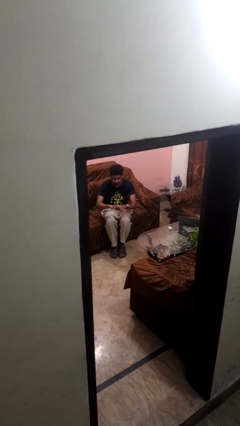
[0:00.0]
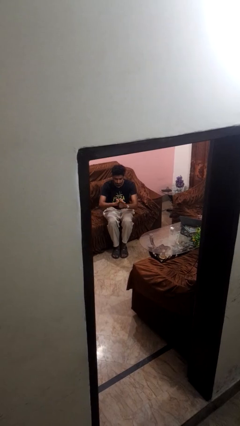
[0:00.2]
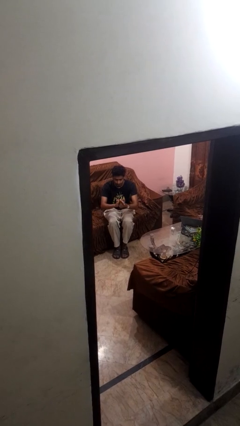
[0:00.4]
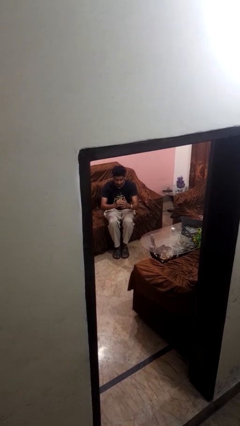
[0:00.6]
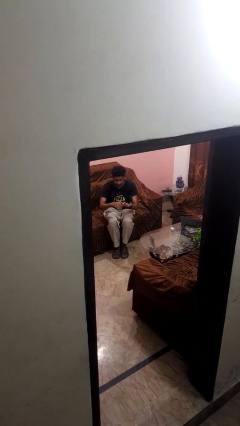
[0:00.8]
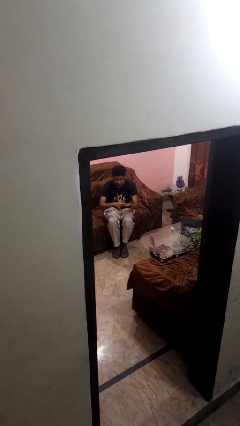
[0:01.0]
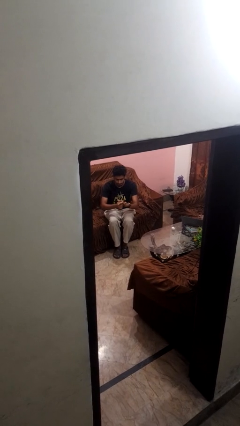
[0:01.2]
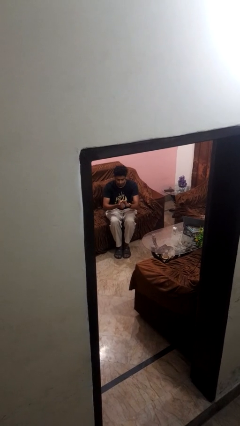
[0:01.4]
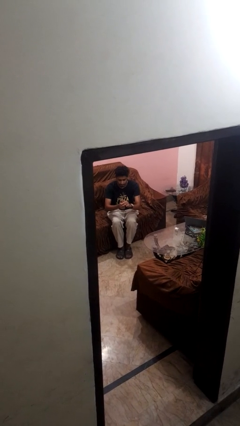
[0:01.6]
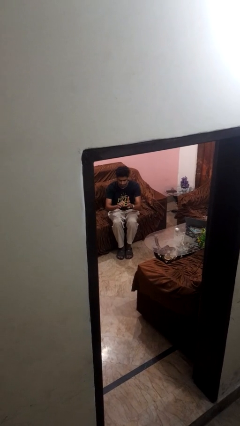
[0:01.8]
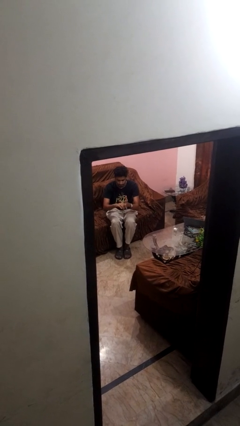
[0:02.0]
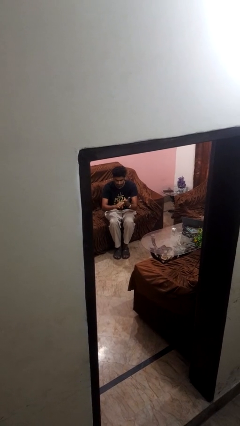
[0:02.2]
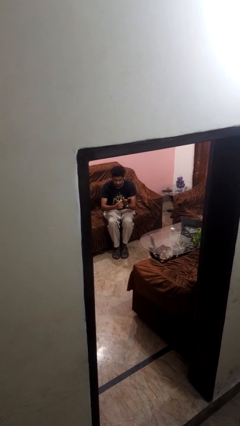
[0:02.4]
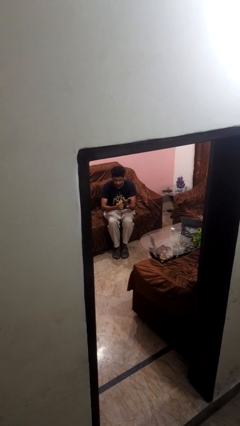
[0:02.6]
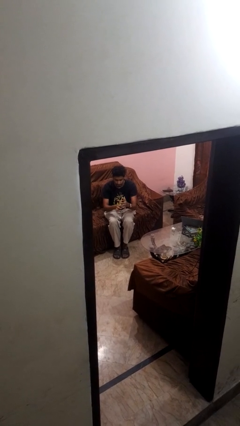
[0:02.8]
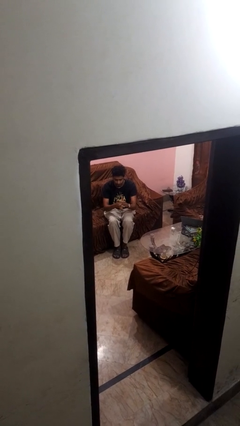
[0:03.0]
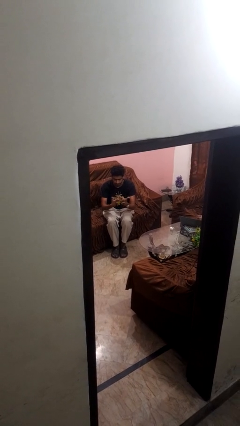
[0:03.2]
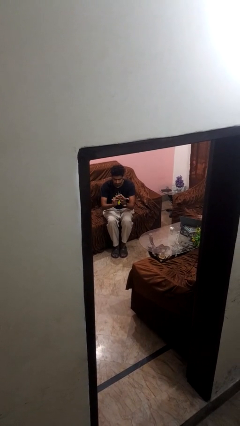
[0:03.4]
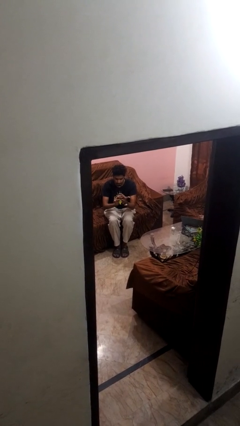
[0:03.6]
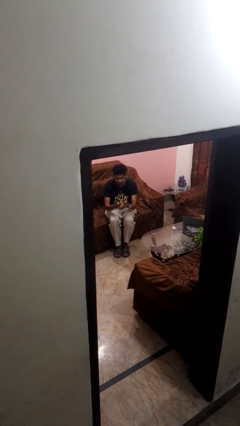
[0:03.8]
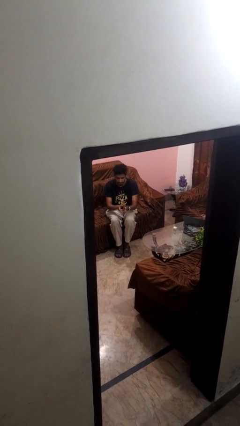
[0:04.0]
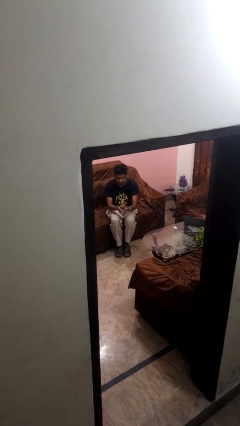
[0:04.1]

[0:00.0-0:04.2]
person cracks knuckles

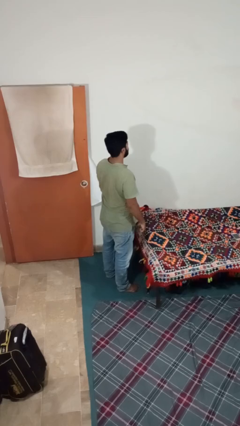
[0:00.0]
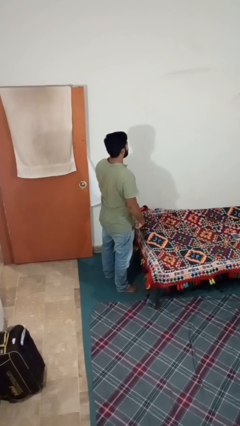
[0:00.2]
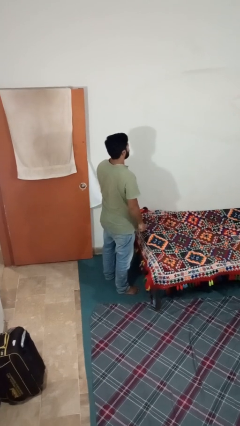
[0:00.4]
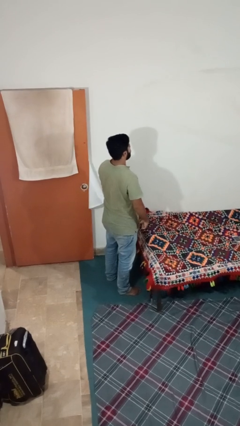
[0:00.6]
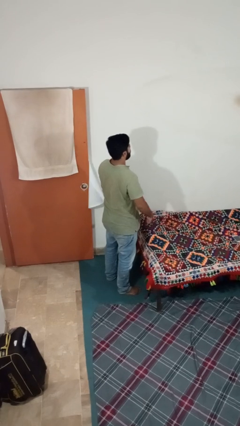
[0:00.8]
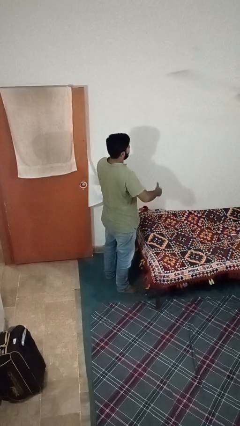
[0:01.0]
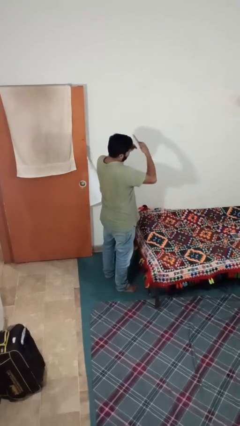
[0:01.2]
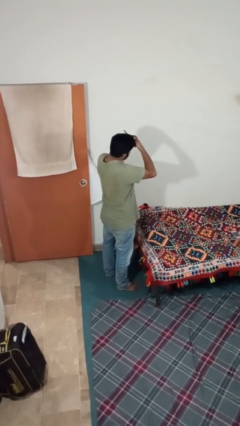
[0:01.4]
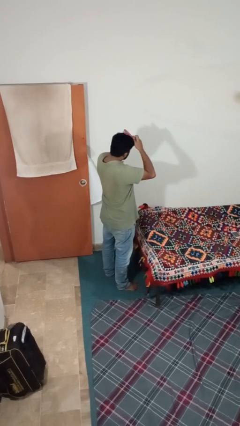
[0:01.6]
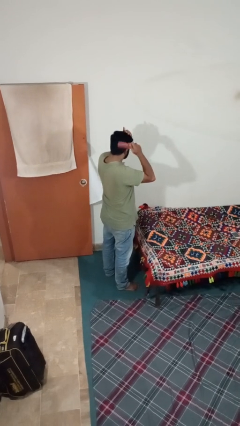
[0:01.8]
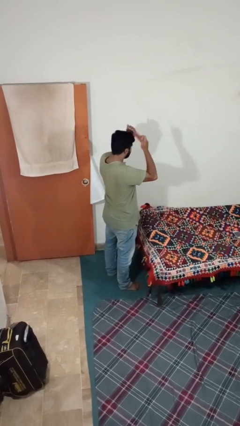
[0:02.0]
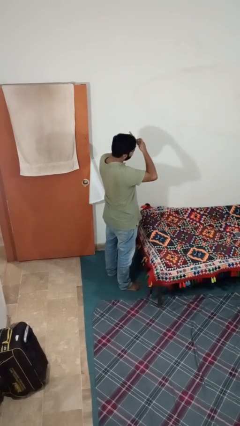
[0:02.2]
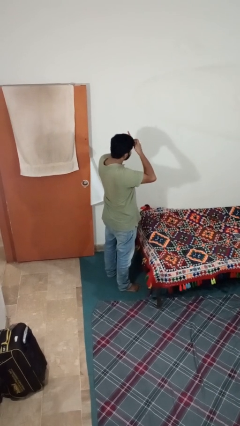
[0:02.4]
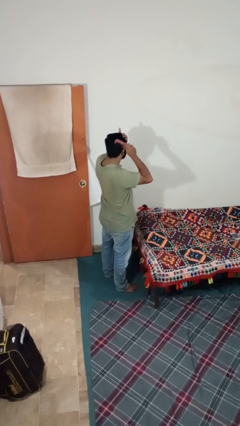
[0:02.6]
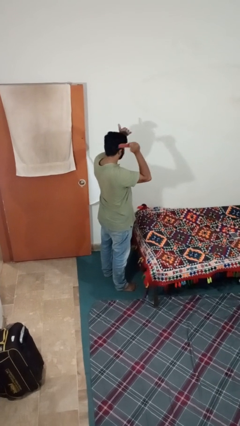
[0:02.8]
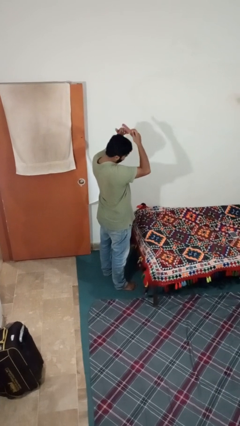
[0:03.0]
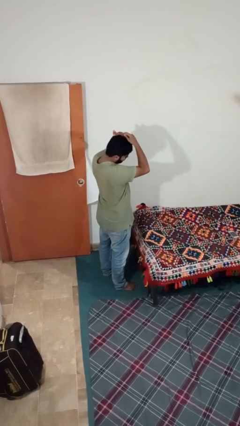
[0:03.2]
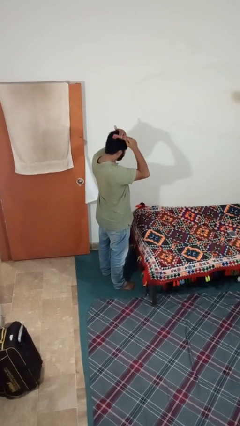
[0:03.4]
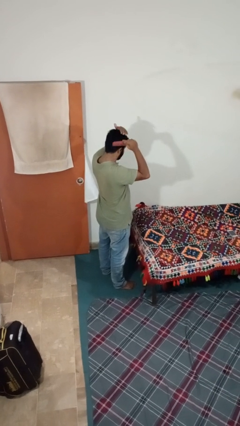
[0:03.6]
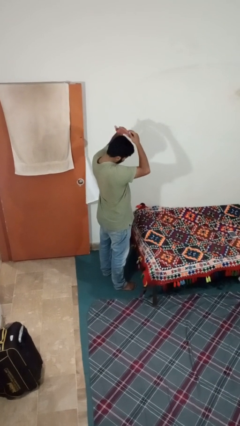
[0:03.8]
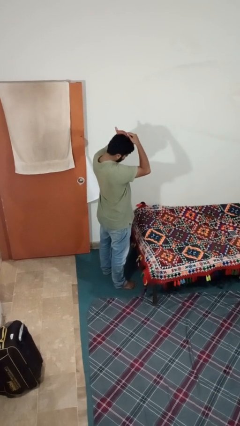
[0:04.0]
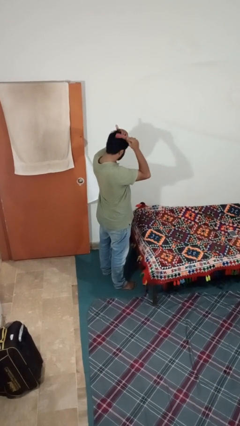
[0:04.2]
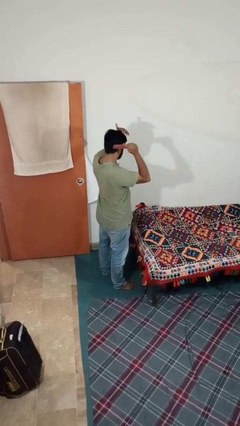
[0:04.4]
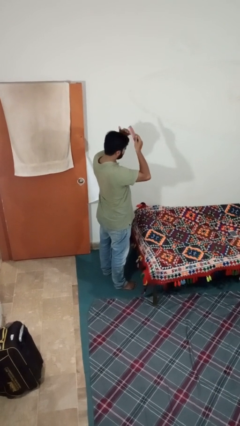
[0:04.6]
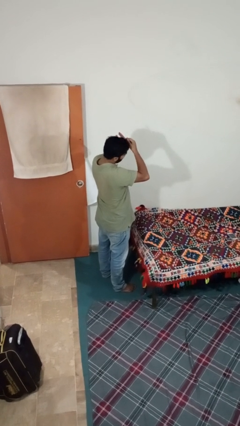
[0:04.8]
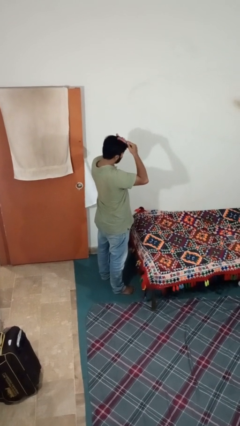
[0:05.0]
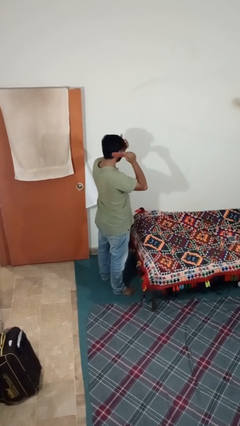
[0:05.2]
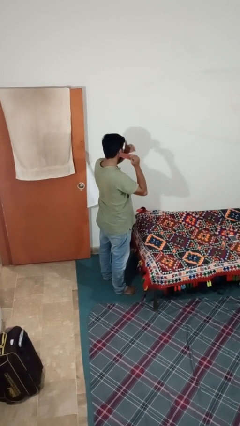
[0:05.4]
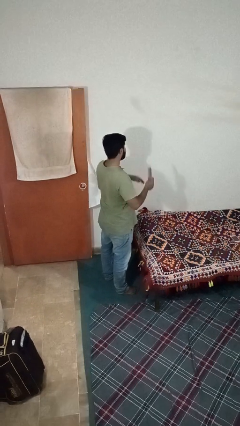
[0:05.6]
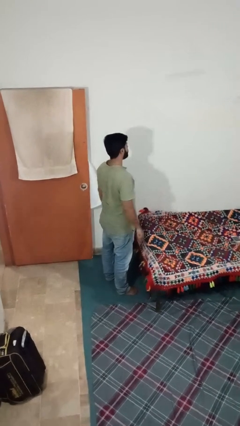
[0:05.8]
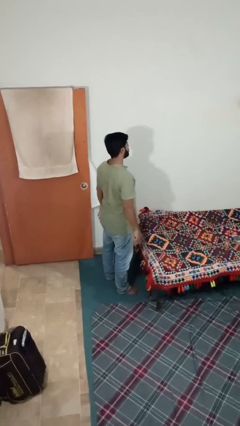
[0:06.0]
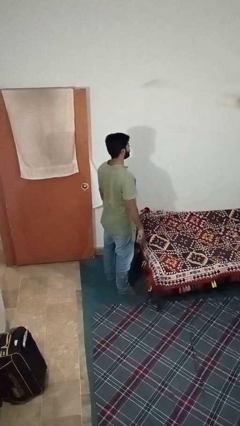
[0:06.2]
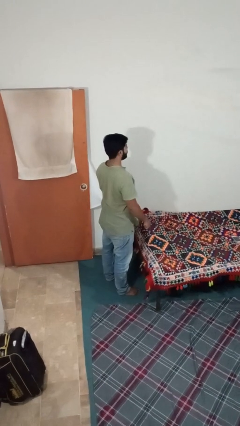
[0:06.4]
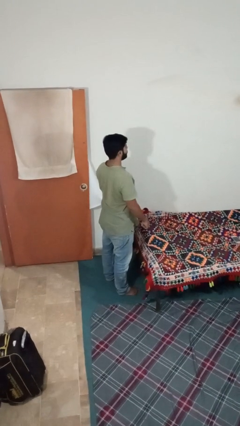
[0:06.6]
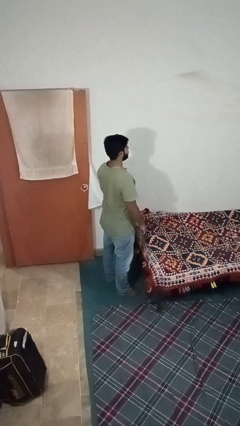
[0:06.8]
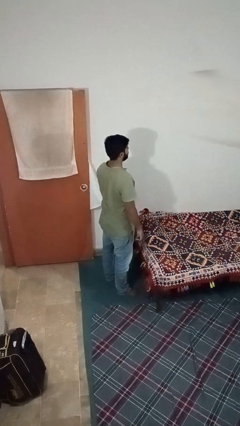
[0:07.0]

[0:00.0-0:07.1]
person brushes hair

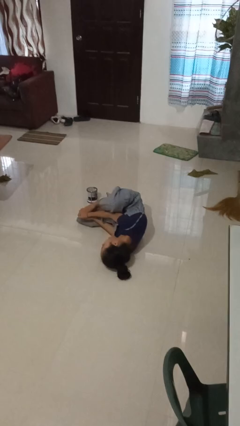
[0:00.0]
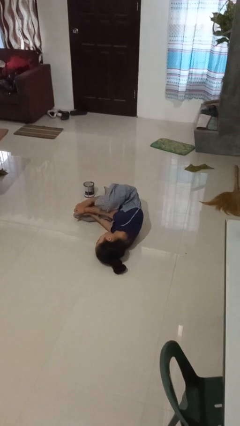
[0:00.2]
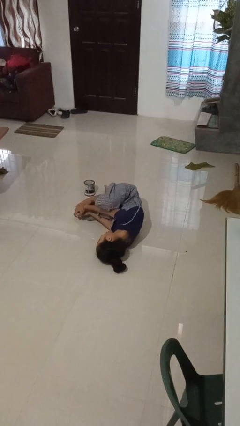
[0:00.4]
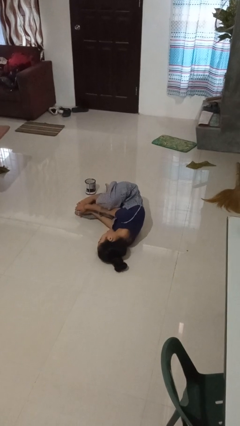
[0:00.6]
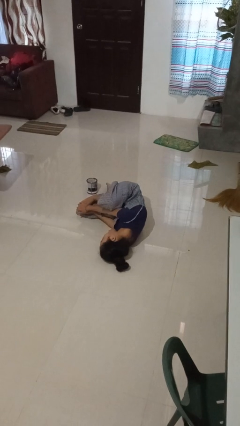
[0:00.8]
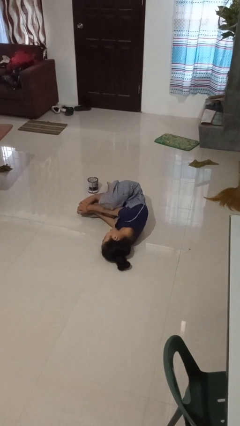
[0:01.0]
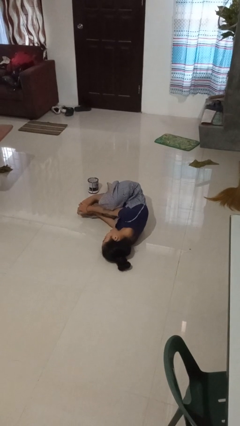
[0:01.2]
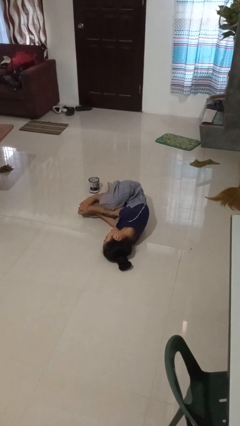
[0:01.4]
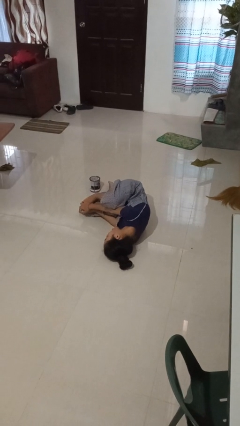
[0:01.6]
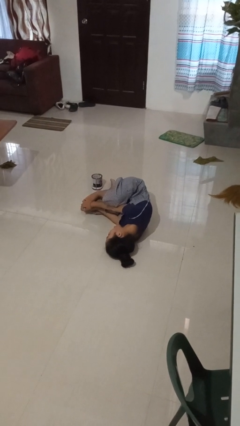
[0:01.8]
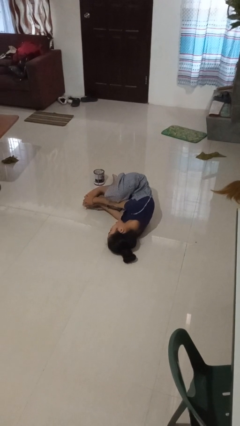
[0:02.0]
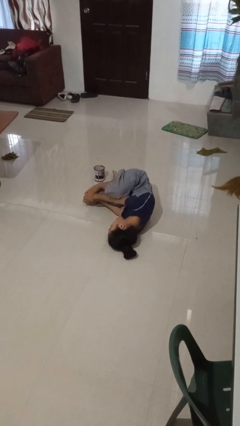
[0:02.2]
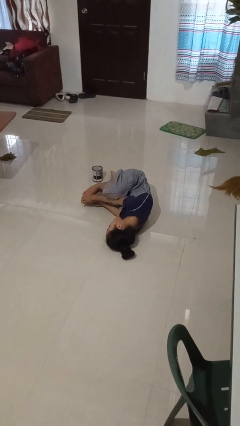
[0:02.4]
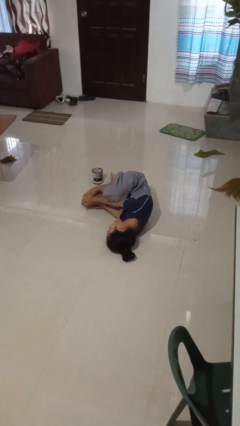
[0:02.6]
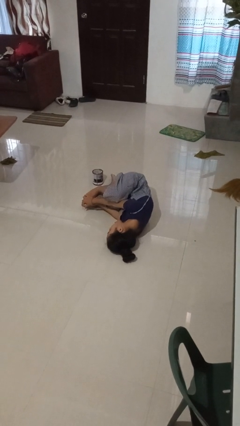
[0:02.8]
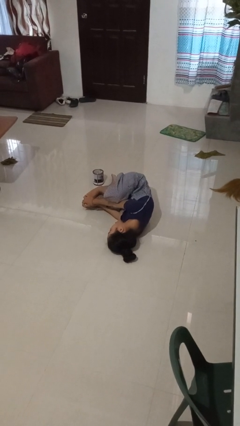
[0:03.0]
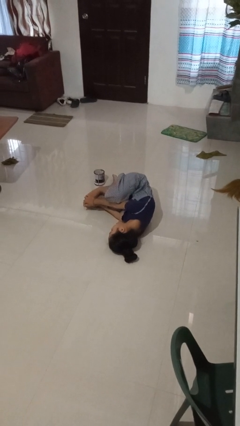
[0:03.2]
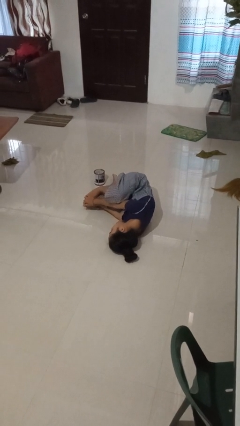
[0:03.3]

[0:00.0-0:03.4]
person lies down on floor

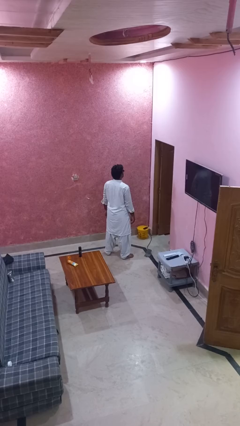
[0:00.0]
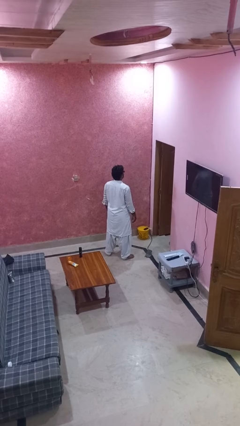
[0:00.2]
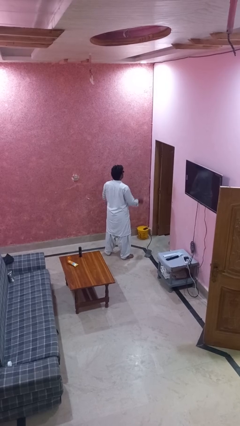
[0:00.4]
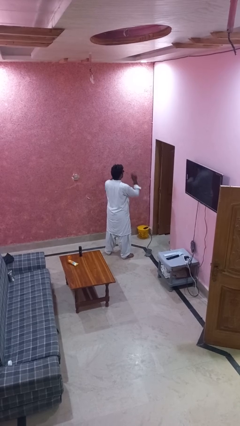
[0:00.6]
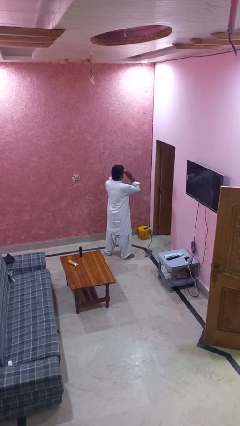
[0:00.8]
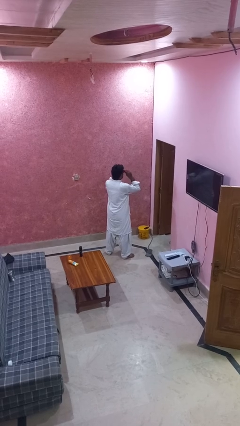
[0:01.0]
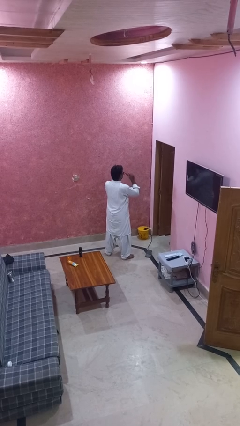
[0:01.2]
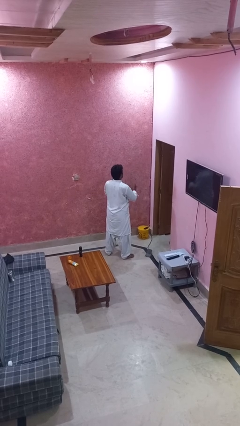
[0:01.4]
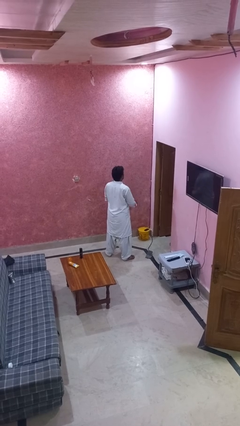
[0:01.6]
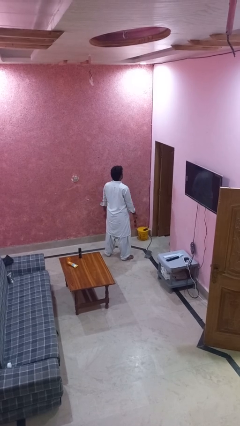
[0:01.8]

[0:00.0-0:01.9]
person takes off sunglasses

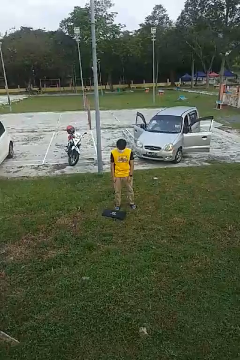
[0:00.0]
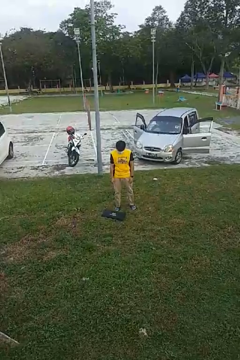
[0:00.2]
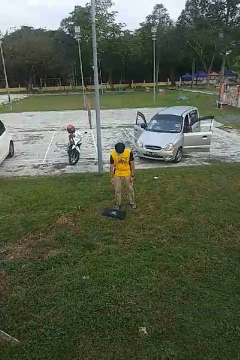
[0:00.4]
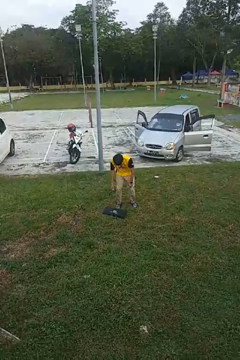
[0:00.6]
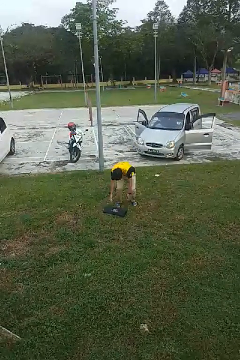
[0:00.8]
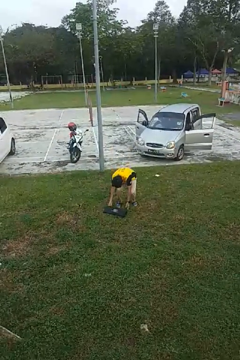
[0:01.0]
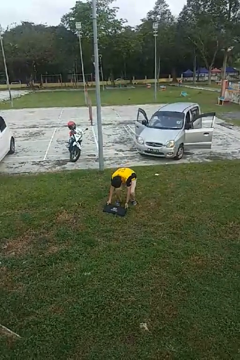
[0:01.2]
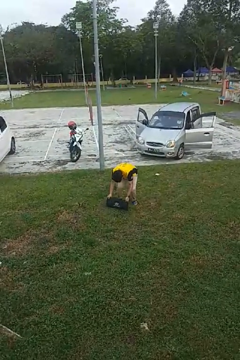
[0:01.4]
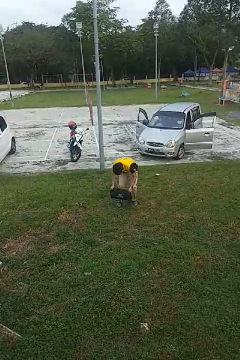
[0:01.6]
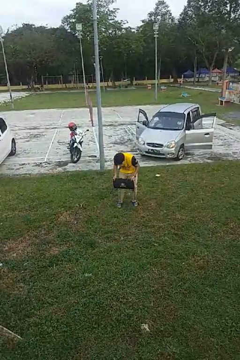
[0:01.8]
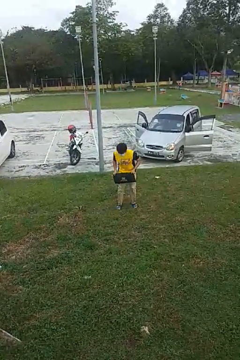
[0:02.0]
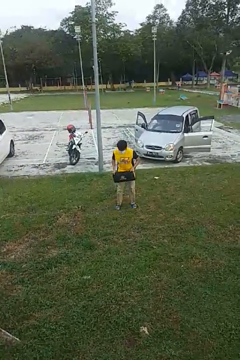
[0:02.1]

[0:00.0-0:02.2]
person picks up object from floor
